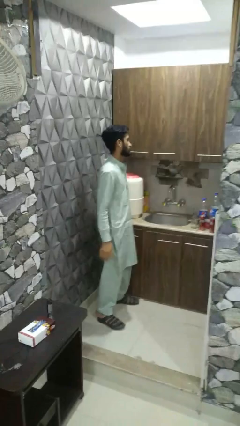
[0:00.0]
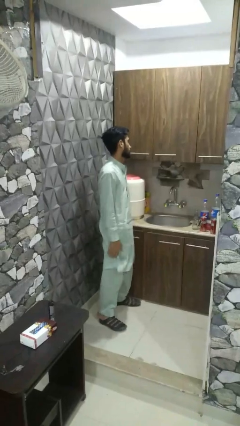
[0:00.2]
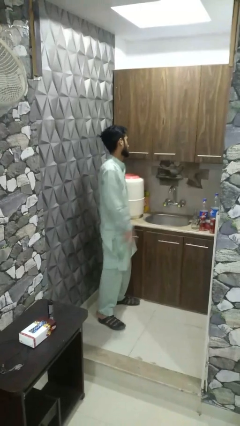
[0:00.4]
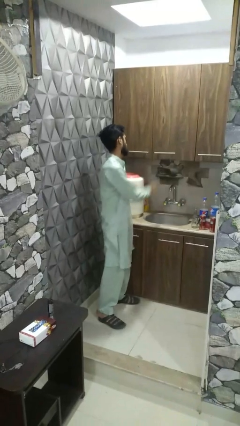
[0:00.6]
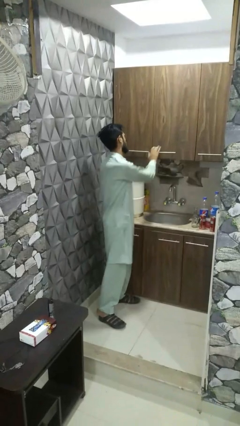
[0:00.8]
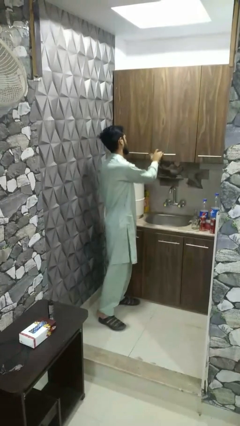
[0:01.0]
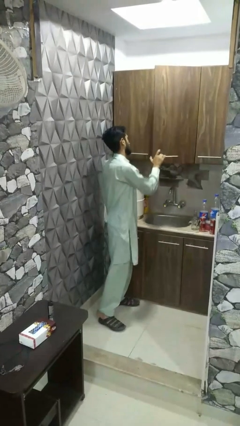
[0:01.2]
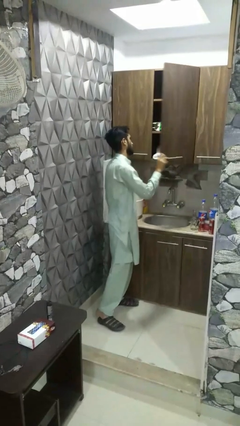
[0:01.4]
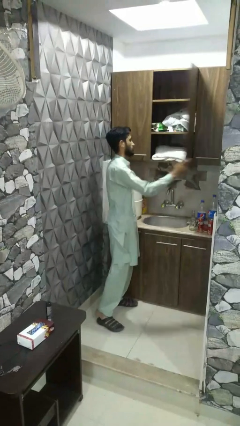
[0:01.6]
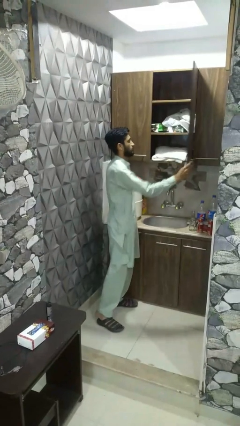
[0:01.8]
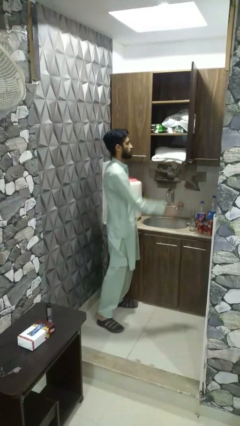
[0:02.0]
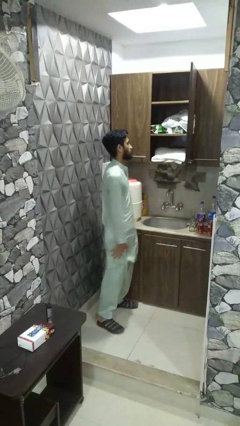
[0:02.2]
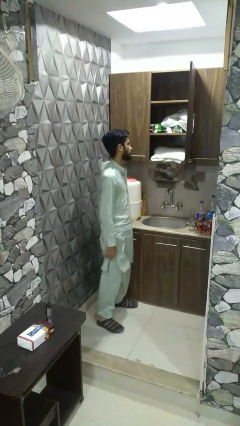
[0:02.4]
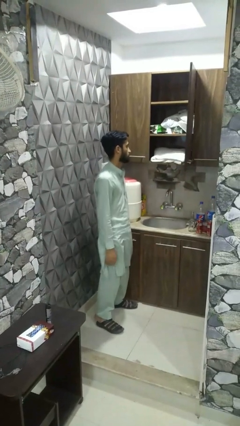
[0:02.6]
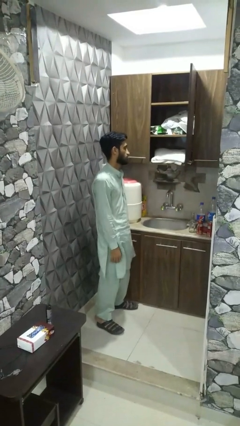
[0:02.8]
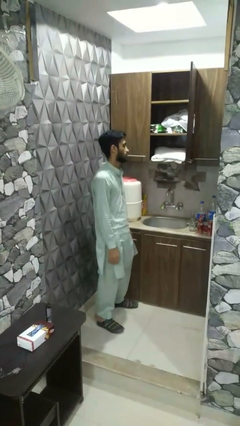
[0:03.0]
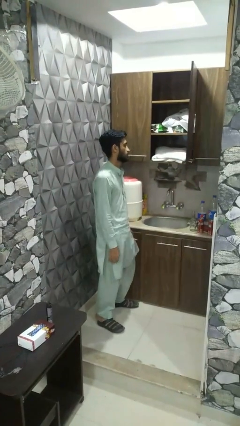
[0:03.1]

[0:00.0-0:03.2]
person opens dresser drawer

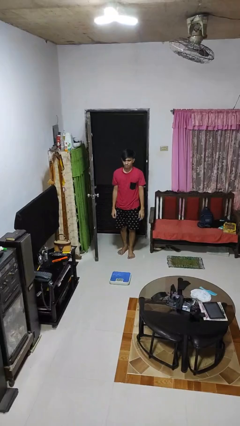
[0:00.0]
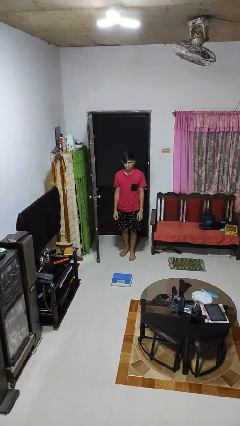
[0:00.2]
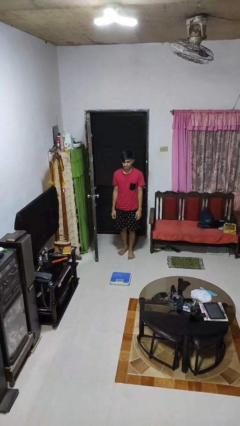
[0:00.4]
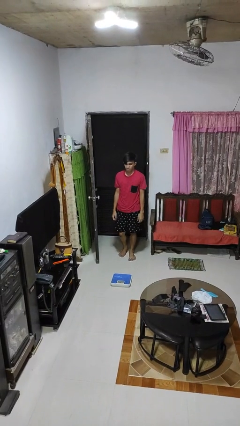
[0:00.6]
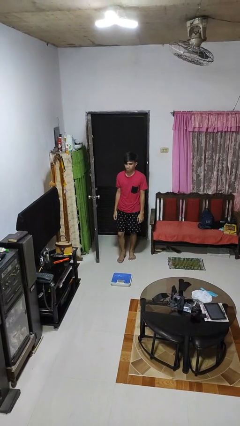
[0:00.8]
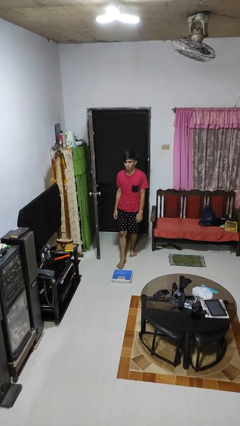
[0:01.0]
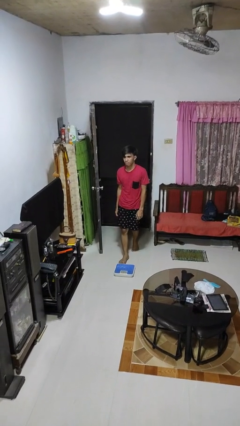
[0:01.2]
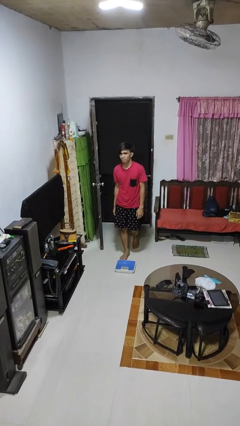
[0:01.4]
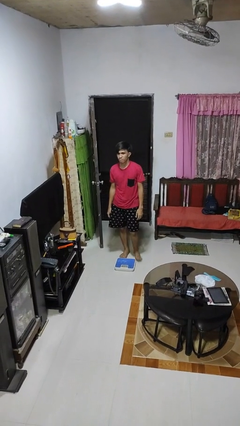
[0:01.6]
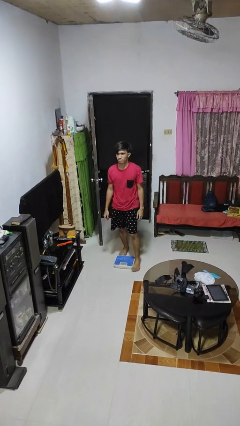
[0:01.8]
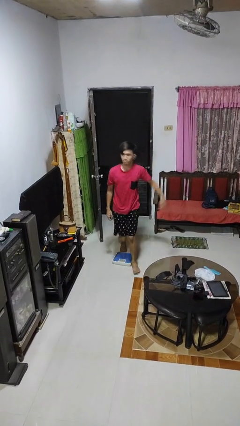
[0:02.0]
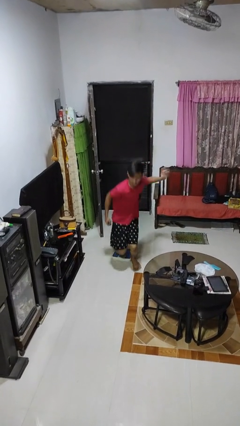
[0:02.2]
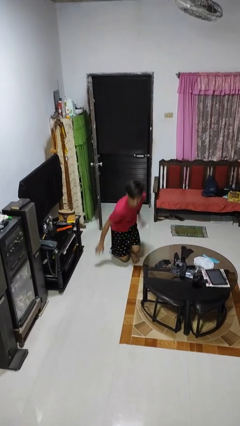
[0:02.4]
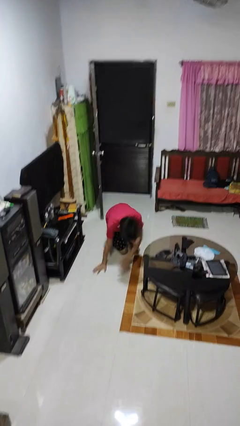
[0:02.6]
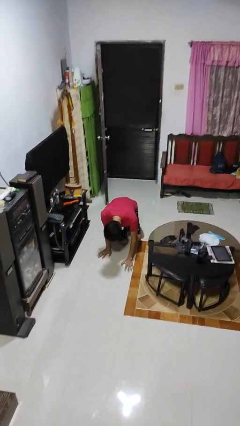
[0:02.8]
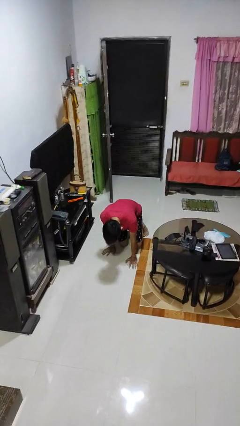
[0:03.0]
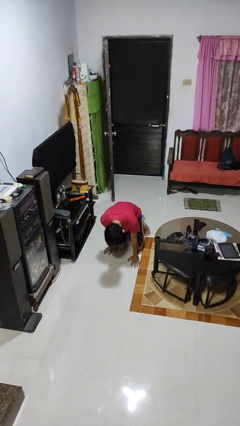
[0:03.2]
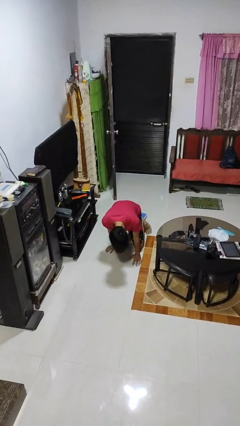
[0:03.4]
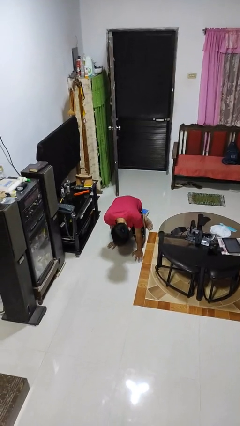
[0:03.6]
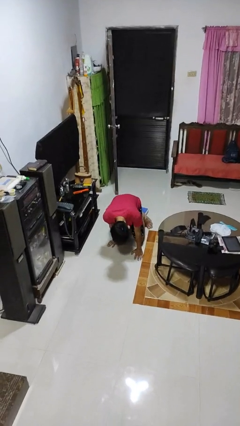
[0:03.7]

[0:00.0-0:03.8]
person trips on object on floor

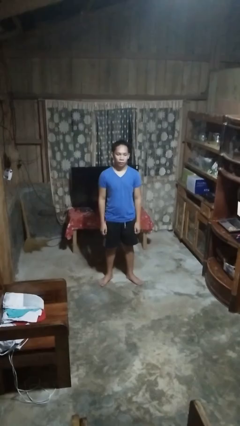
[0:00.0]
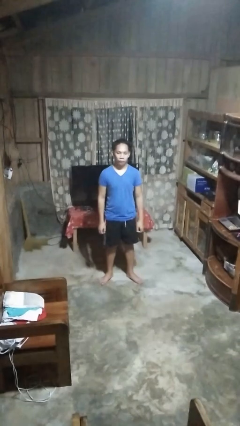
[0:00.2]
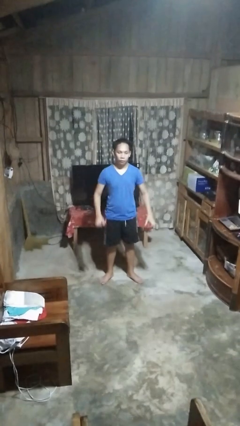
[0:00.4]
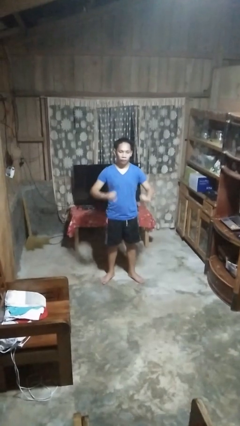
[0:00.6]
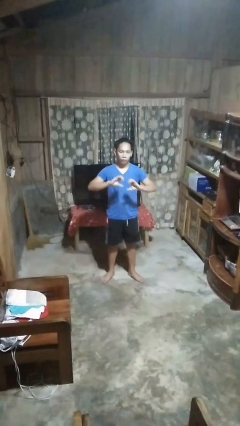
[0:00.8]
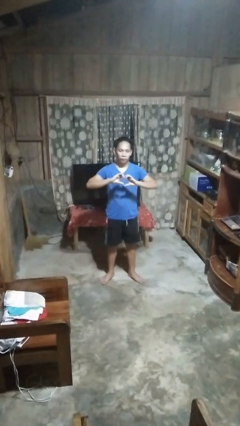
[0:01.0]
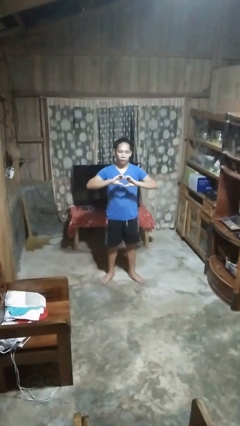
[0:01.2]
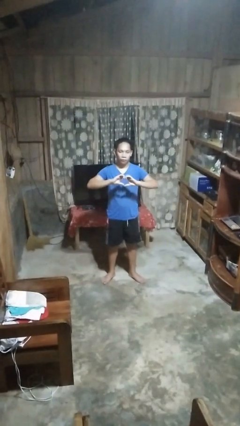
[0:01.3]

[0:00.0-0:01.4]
person gestures heart

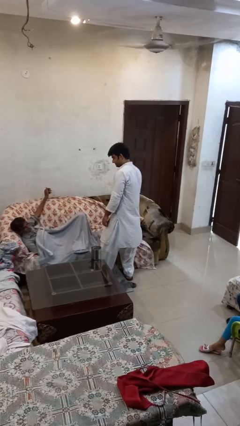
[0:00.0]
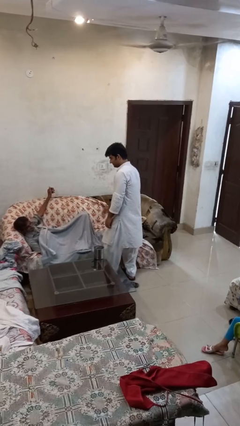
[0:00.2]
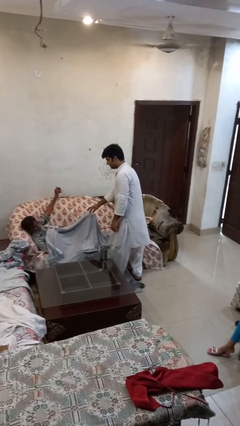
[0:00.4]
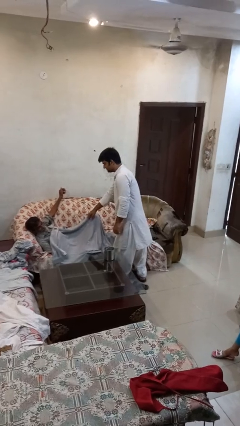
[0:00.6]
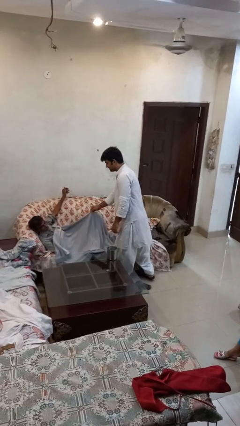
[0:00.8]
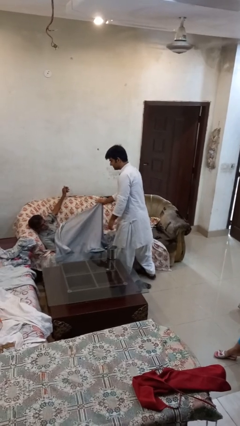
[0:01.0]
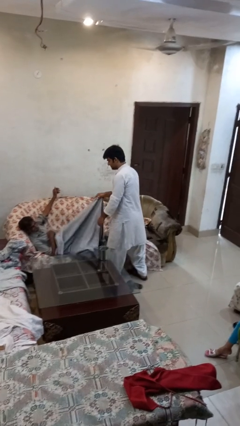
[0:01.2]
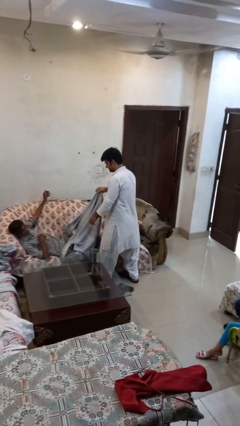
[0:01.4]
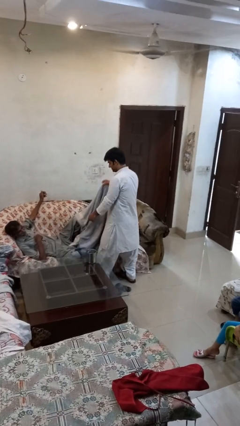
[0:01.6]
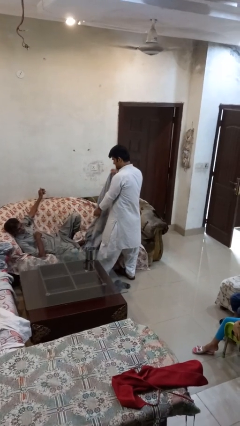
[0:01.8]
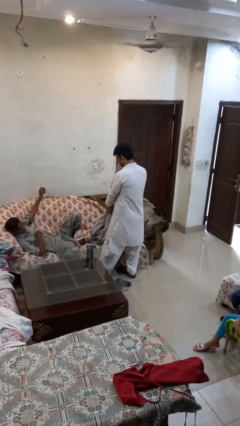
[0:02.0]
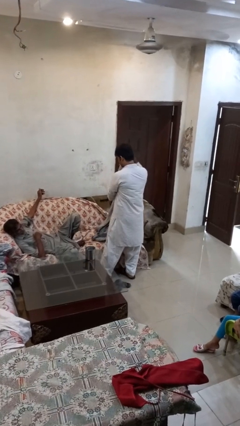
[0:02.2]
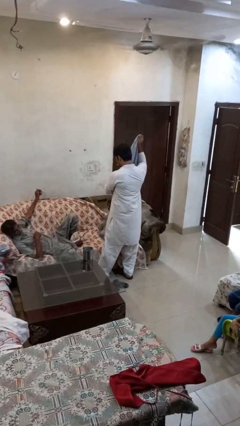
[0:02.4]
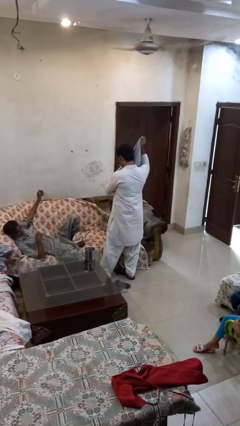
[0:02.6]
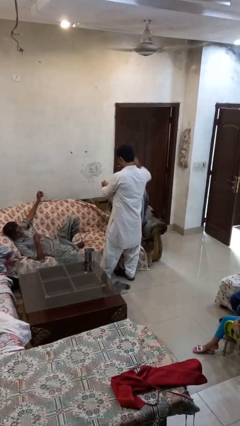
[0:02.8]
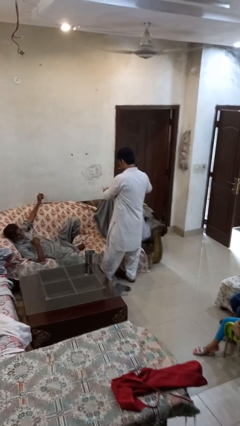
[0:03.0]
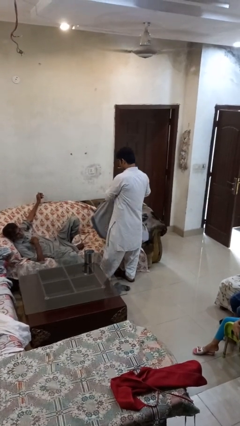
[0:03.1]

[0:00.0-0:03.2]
person uncovers friend with blanket

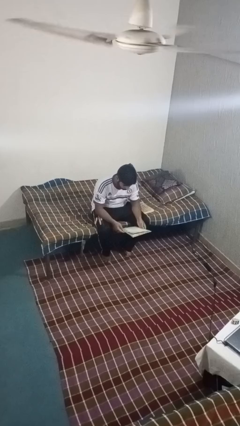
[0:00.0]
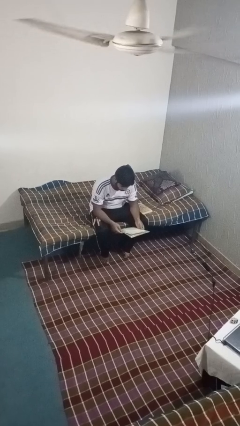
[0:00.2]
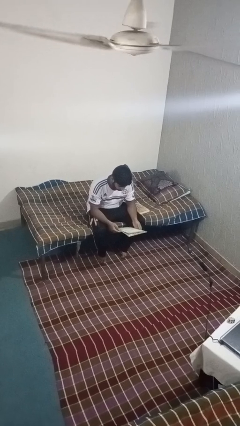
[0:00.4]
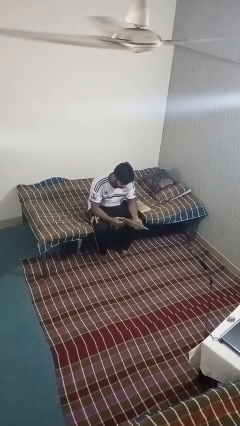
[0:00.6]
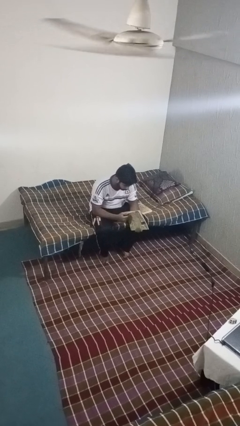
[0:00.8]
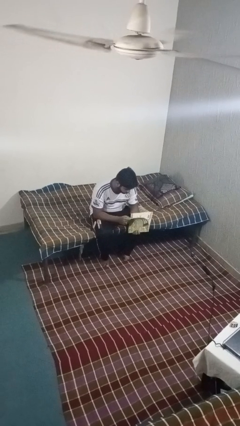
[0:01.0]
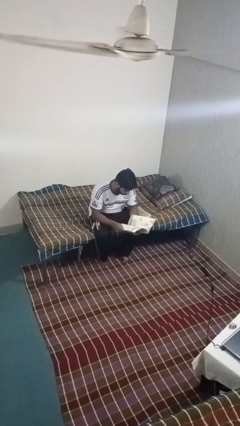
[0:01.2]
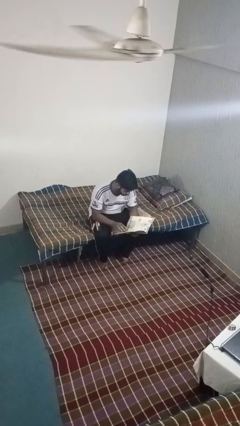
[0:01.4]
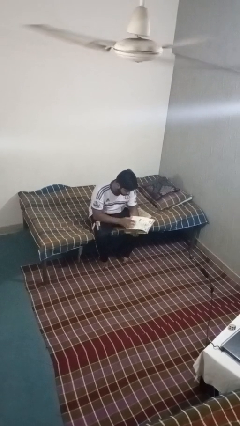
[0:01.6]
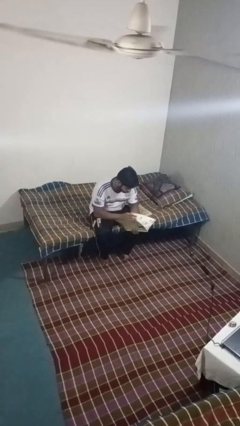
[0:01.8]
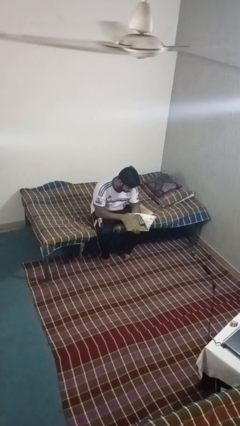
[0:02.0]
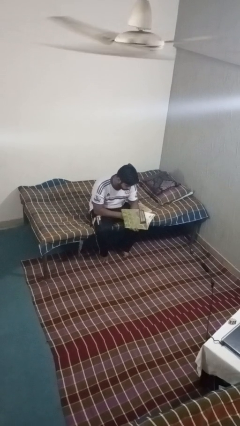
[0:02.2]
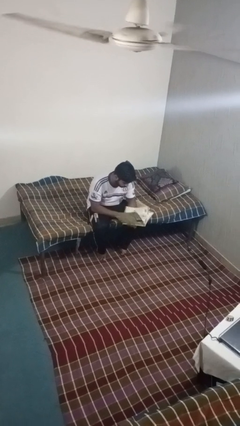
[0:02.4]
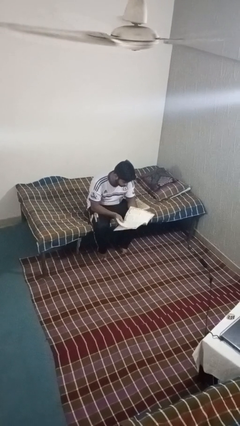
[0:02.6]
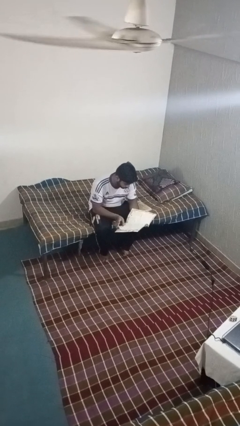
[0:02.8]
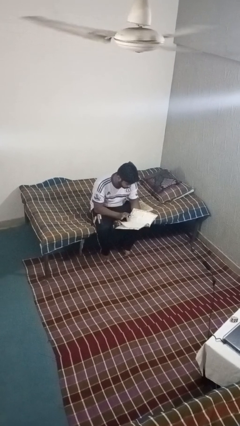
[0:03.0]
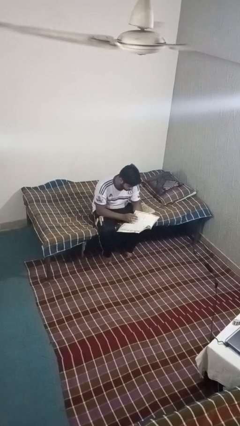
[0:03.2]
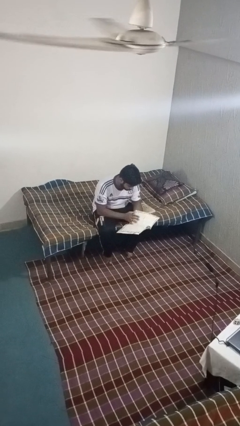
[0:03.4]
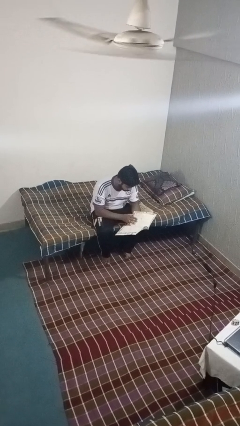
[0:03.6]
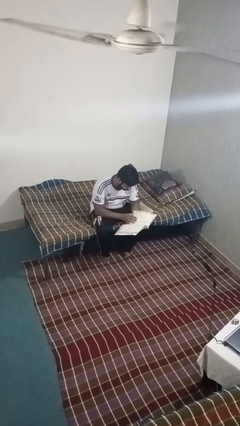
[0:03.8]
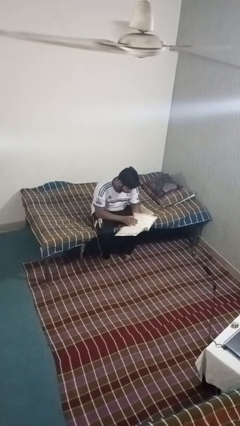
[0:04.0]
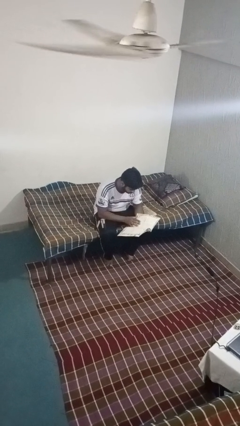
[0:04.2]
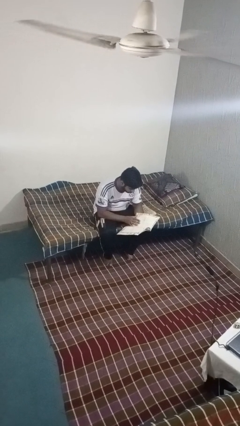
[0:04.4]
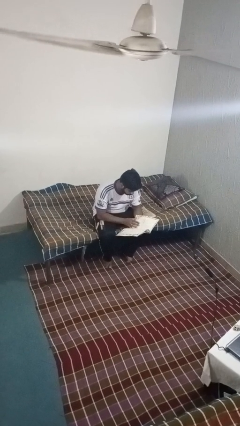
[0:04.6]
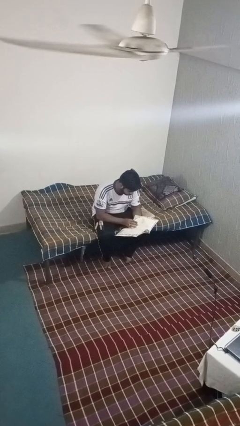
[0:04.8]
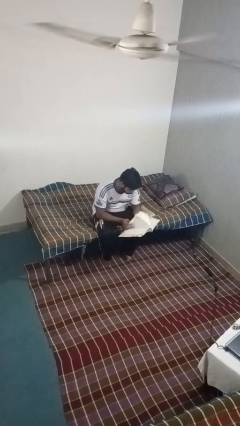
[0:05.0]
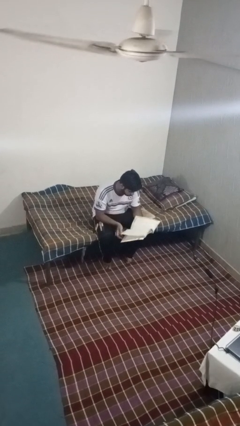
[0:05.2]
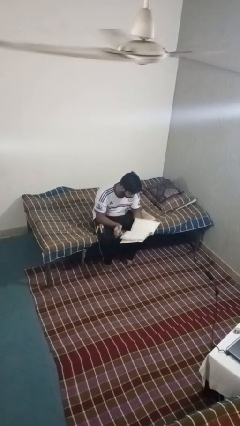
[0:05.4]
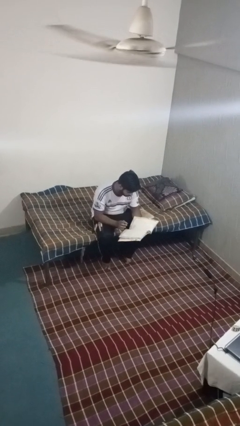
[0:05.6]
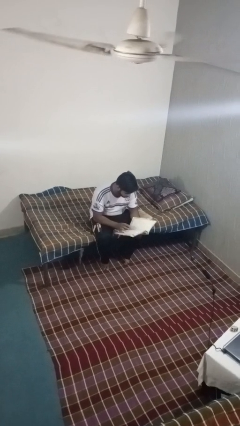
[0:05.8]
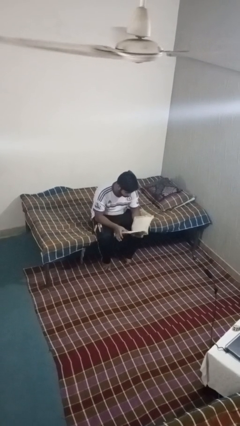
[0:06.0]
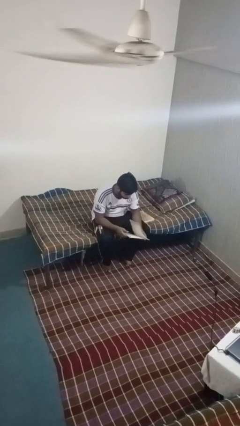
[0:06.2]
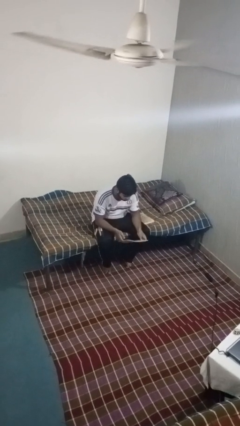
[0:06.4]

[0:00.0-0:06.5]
person reads magazine
